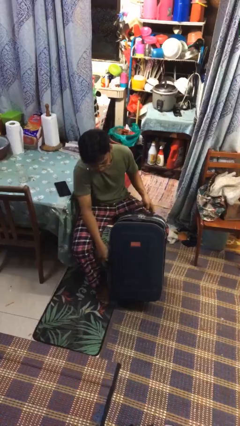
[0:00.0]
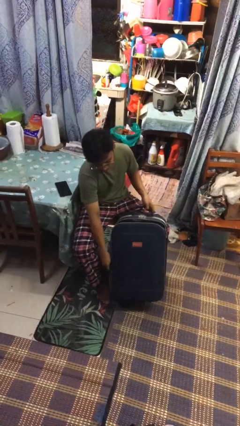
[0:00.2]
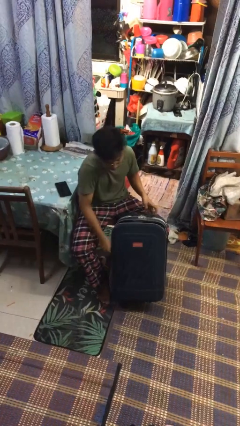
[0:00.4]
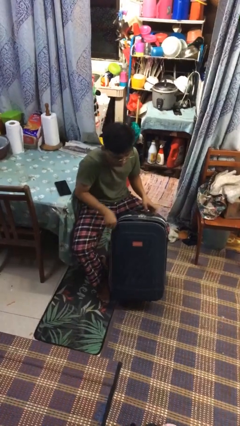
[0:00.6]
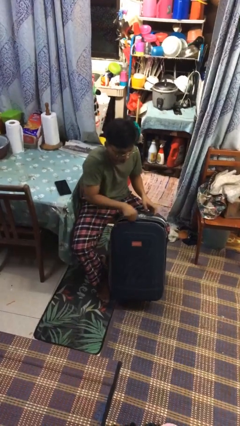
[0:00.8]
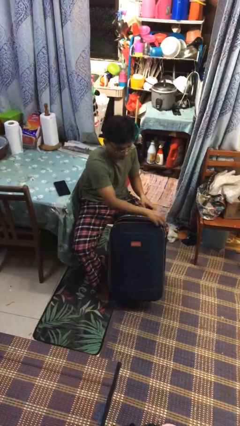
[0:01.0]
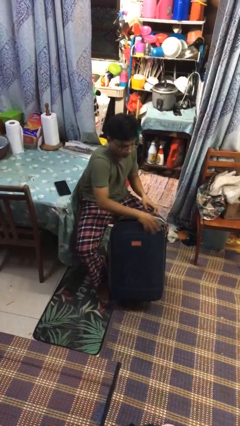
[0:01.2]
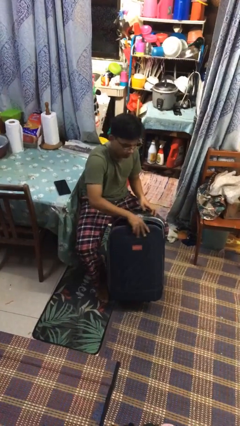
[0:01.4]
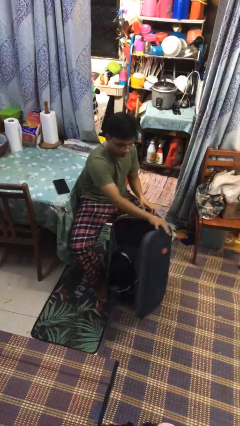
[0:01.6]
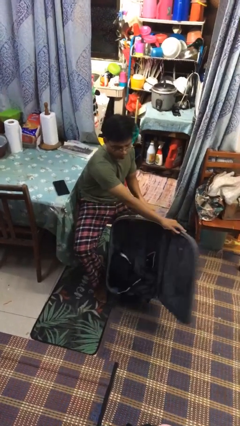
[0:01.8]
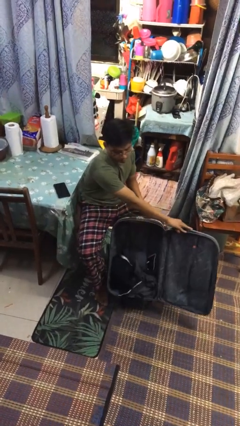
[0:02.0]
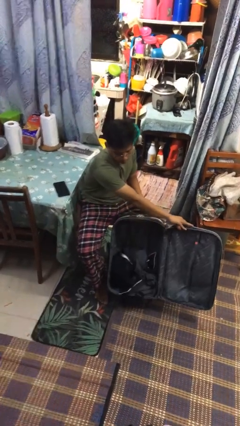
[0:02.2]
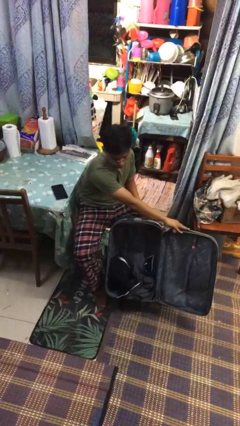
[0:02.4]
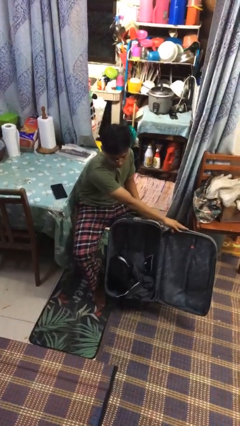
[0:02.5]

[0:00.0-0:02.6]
person opens suitcase

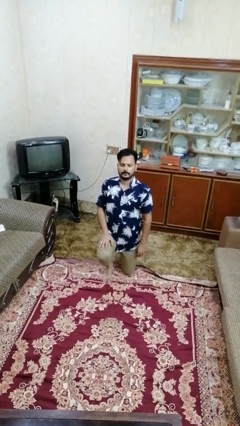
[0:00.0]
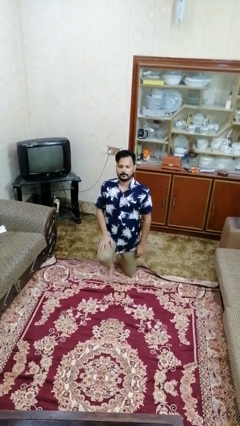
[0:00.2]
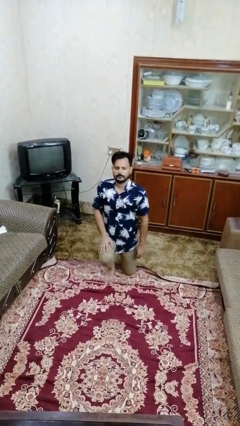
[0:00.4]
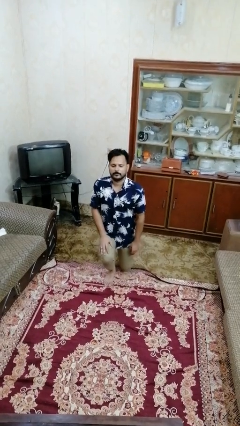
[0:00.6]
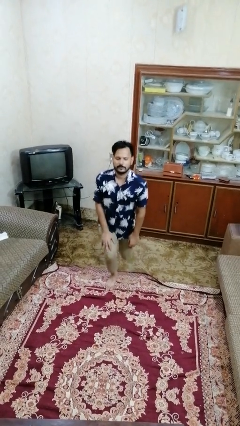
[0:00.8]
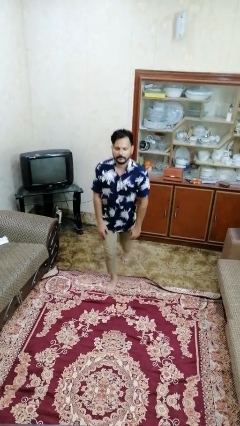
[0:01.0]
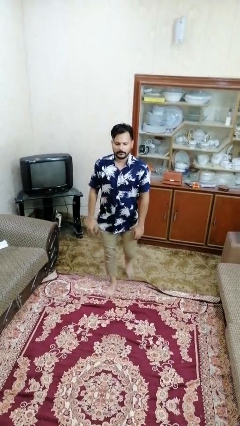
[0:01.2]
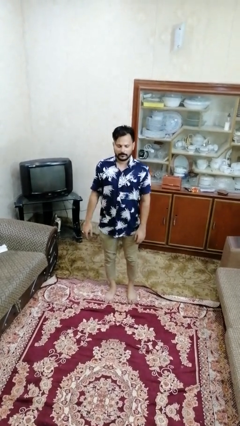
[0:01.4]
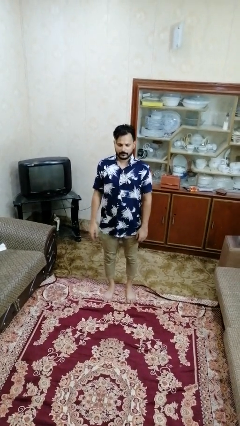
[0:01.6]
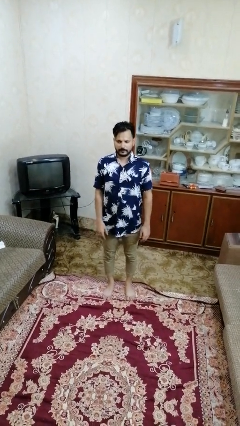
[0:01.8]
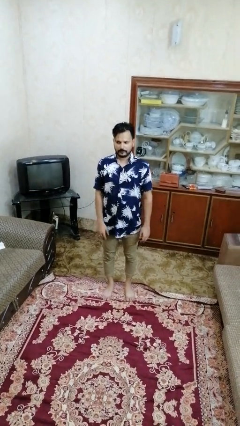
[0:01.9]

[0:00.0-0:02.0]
person stands up from floor

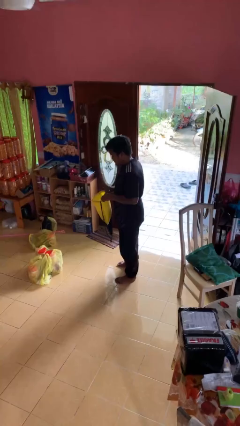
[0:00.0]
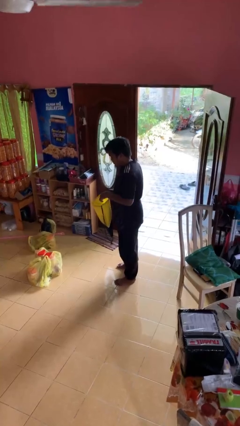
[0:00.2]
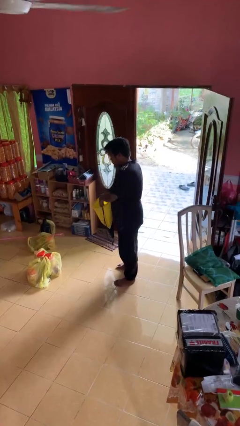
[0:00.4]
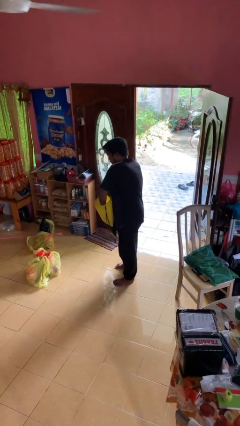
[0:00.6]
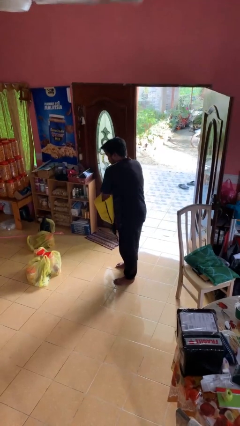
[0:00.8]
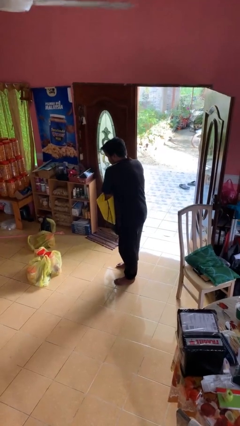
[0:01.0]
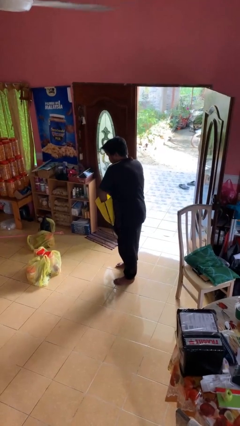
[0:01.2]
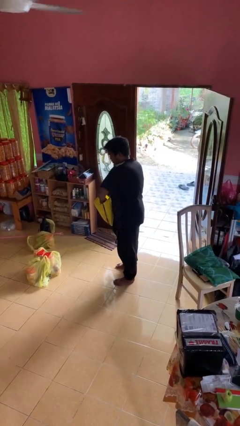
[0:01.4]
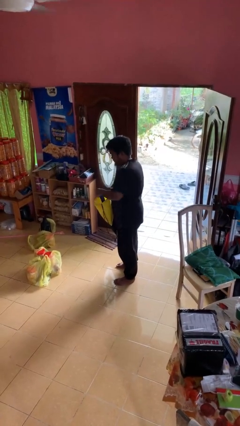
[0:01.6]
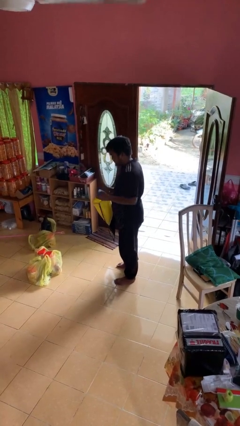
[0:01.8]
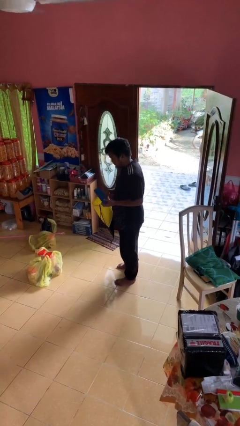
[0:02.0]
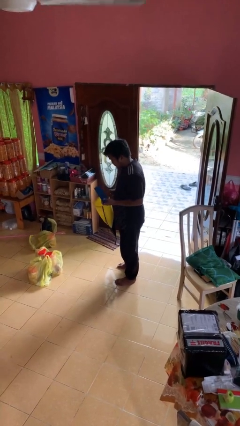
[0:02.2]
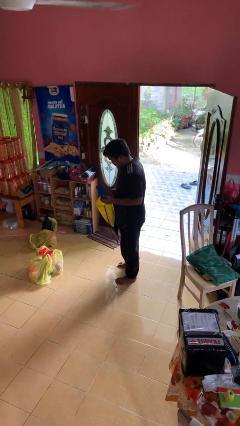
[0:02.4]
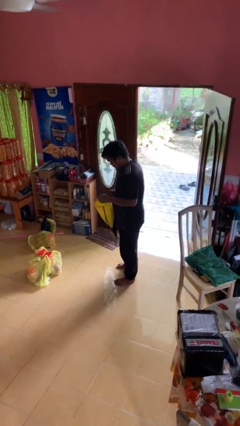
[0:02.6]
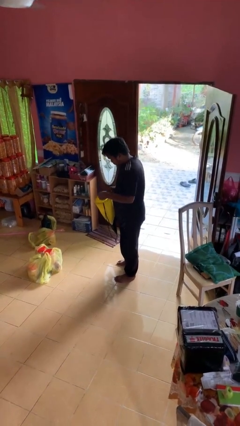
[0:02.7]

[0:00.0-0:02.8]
person takes object from bag

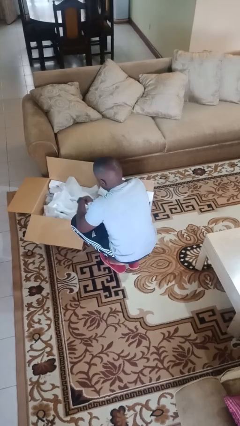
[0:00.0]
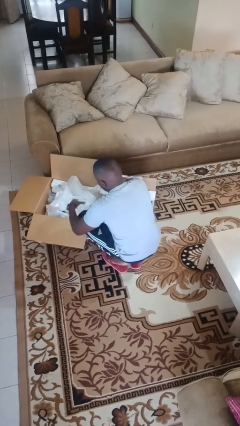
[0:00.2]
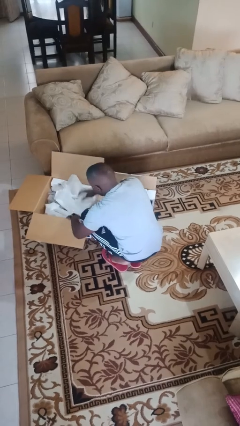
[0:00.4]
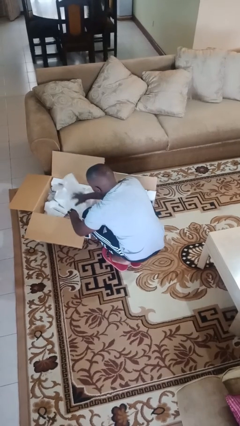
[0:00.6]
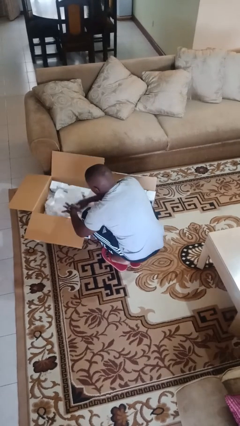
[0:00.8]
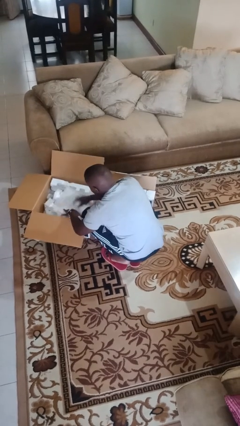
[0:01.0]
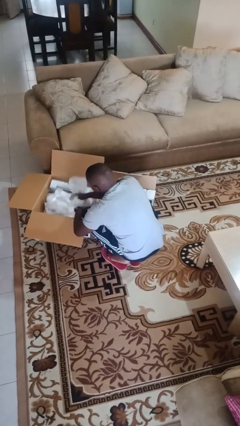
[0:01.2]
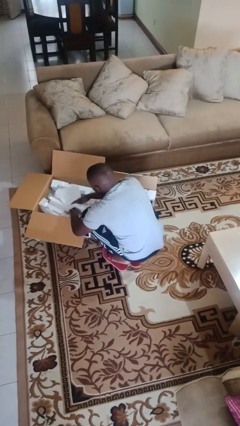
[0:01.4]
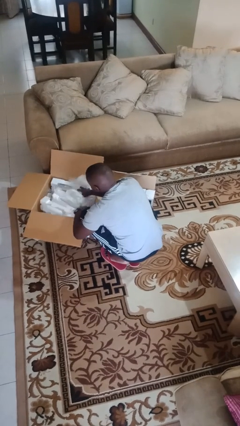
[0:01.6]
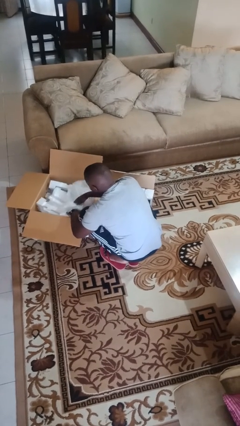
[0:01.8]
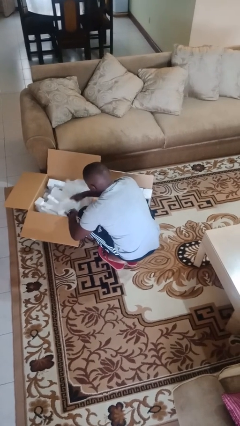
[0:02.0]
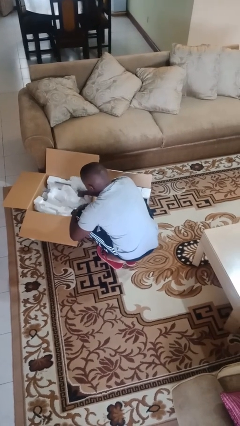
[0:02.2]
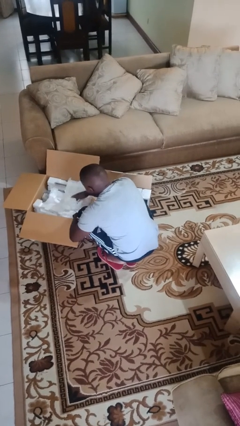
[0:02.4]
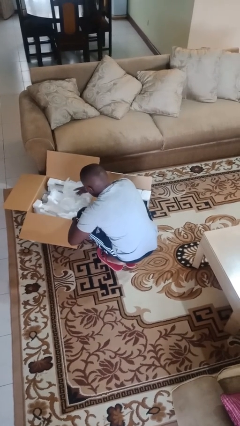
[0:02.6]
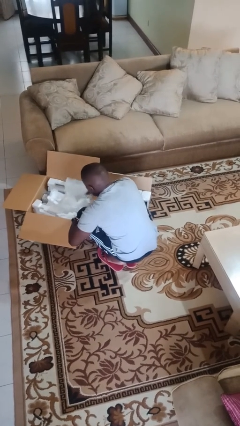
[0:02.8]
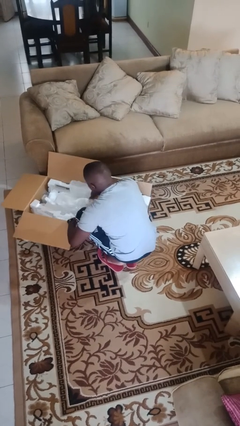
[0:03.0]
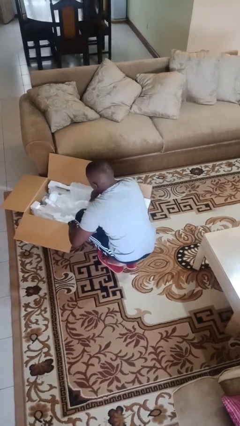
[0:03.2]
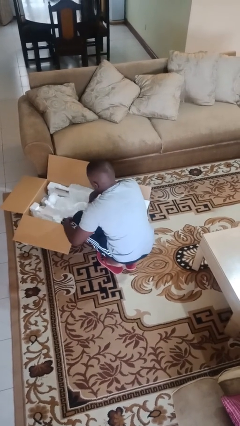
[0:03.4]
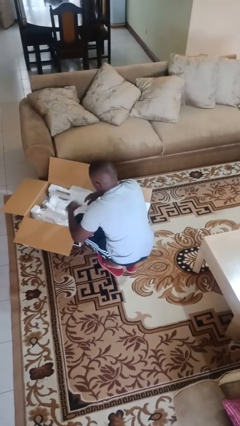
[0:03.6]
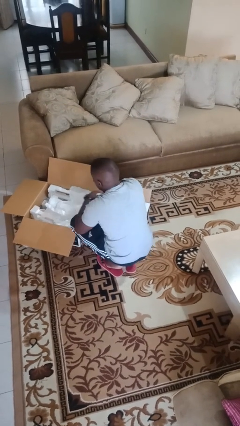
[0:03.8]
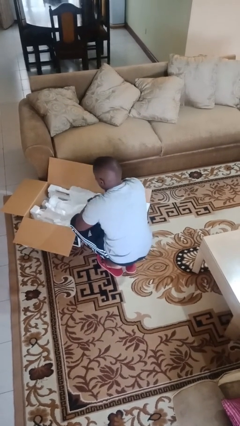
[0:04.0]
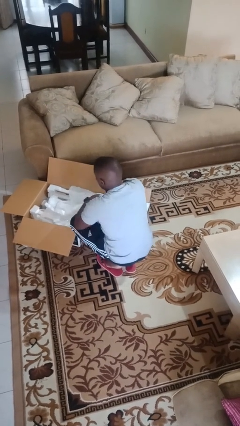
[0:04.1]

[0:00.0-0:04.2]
person searches in box

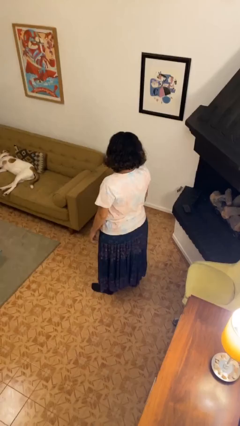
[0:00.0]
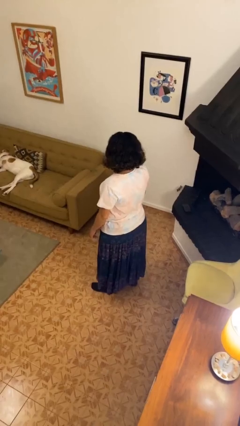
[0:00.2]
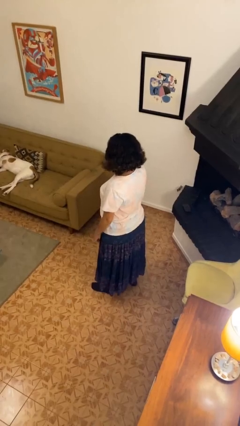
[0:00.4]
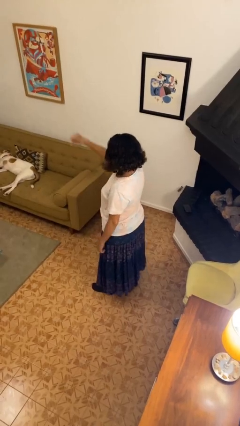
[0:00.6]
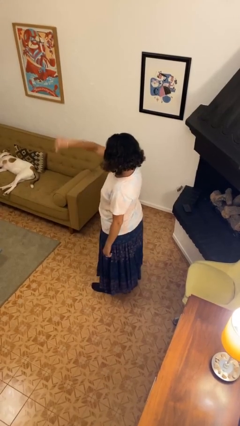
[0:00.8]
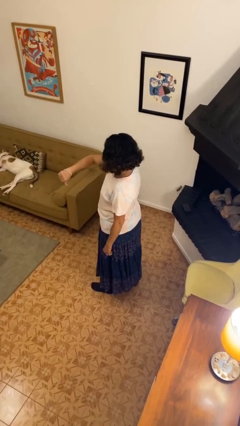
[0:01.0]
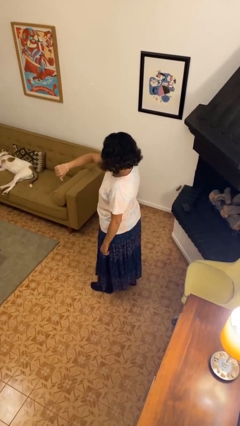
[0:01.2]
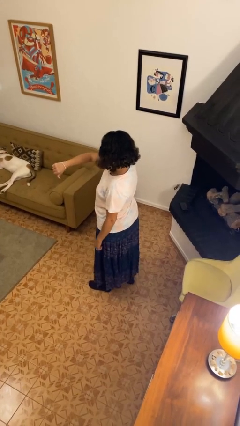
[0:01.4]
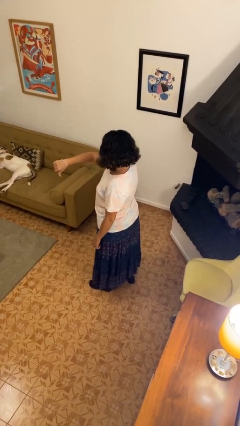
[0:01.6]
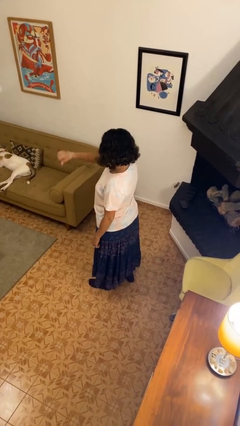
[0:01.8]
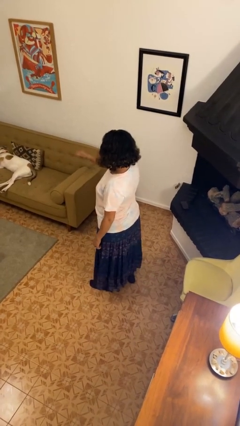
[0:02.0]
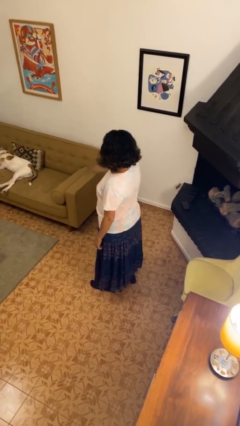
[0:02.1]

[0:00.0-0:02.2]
person gestures thumbs down

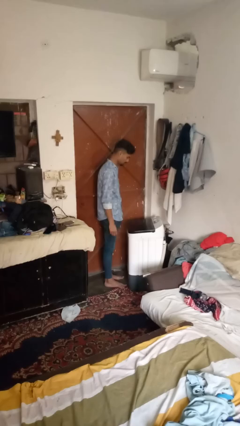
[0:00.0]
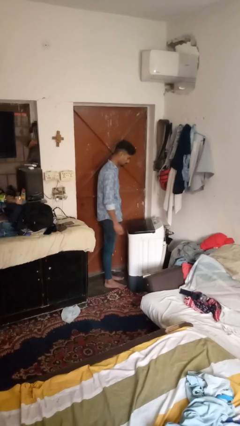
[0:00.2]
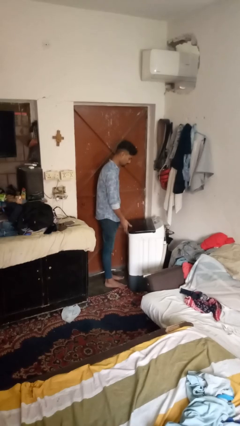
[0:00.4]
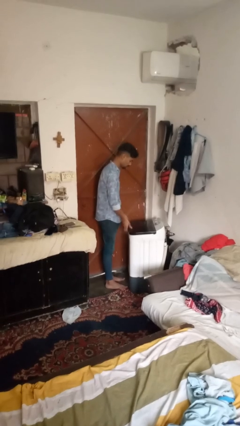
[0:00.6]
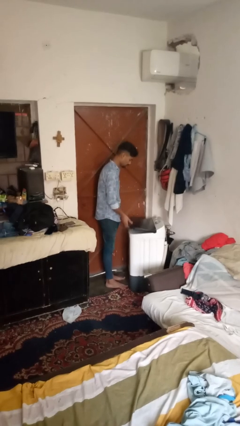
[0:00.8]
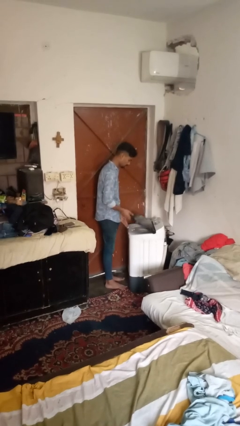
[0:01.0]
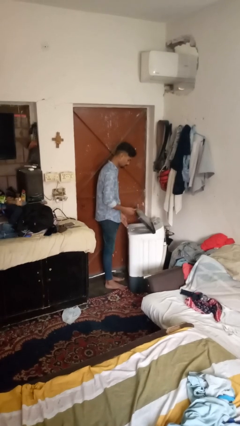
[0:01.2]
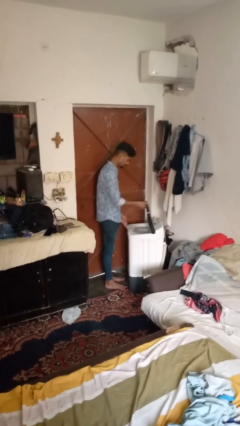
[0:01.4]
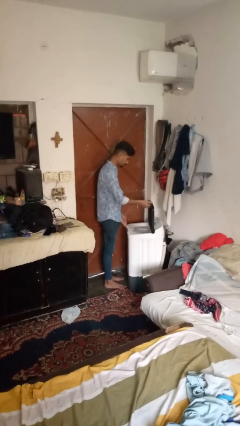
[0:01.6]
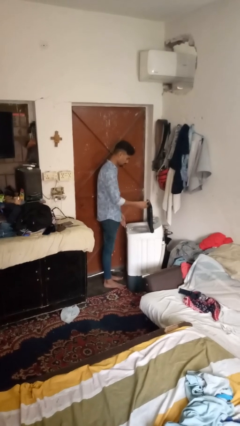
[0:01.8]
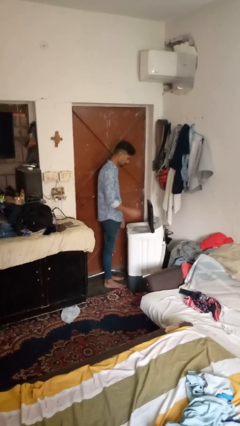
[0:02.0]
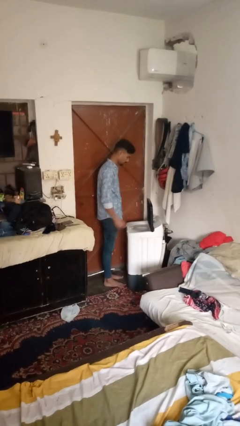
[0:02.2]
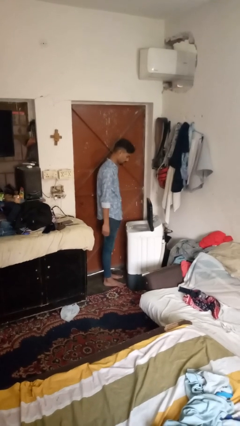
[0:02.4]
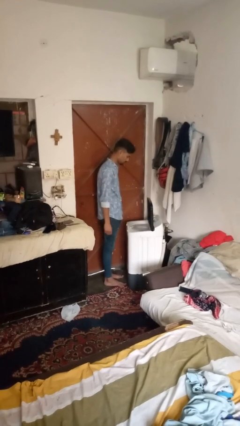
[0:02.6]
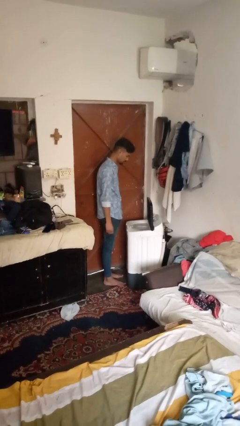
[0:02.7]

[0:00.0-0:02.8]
person opens clothes washer

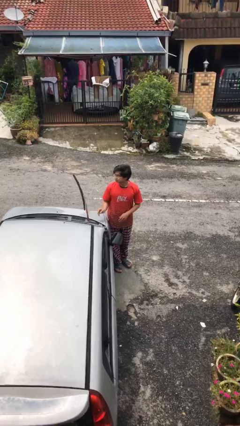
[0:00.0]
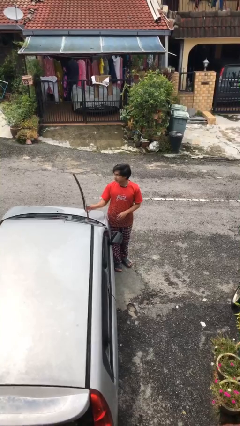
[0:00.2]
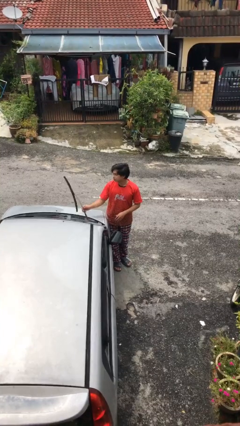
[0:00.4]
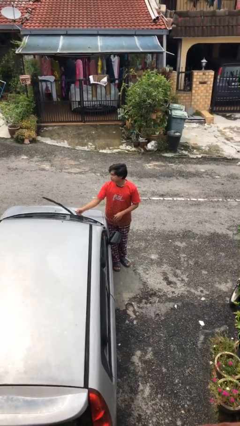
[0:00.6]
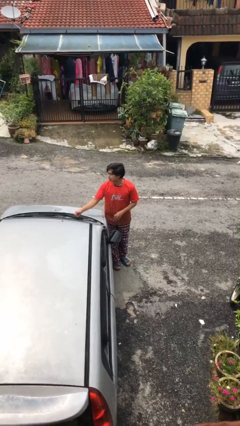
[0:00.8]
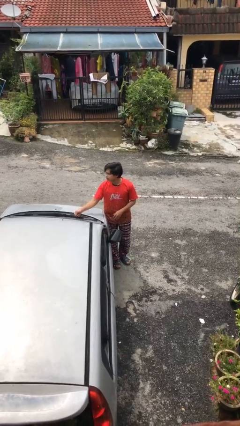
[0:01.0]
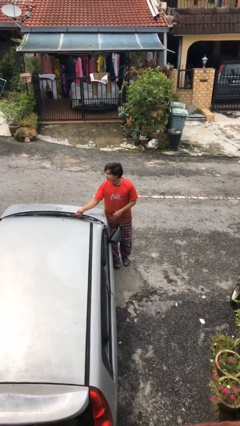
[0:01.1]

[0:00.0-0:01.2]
person flips down car wipers
